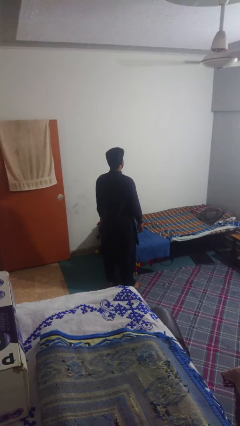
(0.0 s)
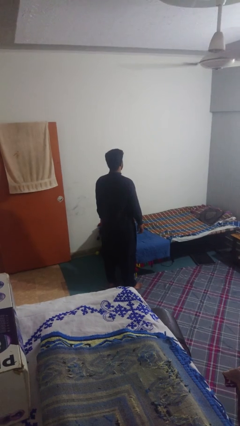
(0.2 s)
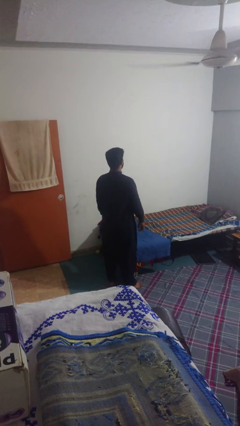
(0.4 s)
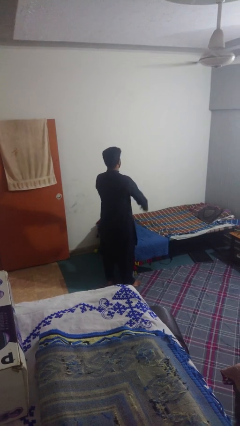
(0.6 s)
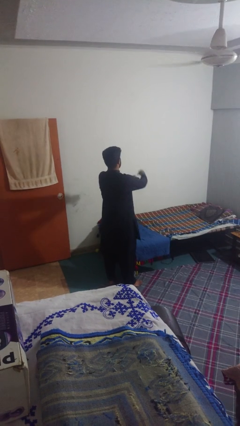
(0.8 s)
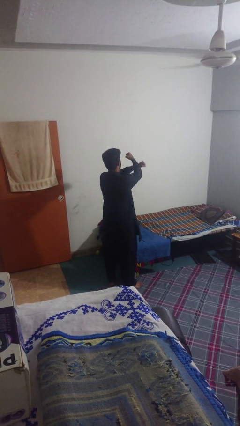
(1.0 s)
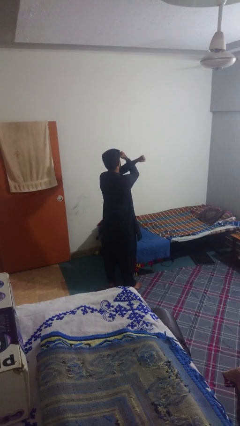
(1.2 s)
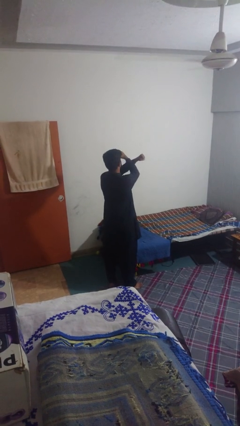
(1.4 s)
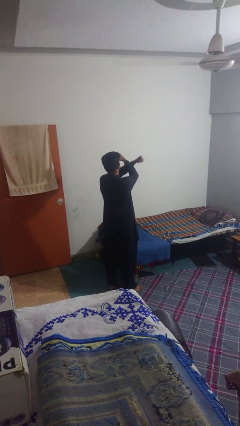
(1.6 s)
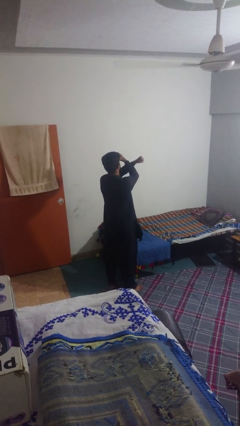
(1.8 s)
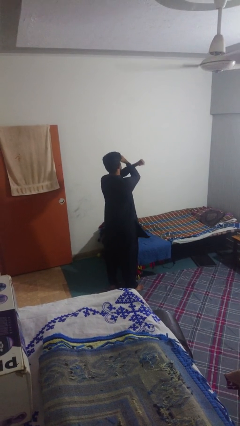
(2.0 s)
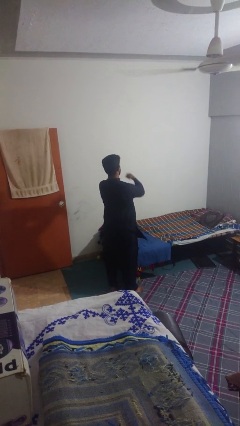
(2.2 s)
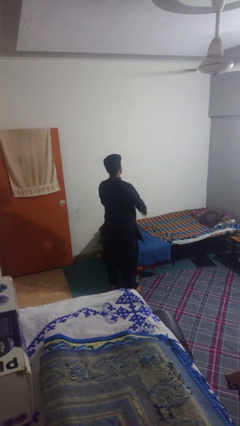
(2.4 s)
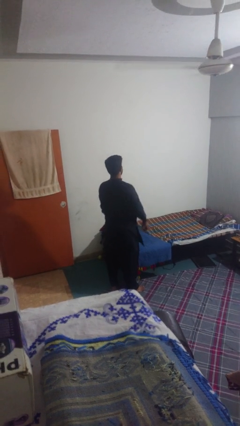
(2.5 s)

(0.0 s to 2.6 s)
person gestures arms x

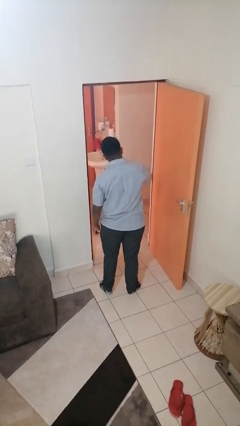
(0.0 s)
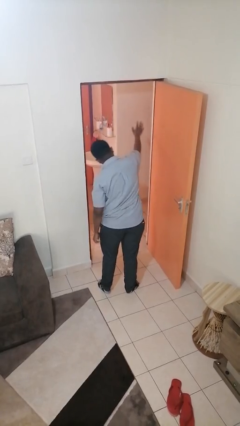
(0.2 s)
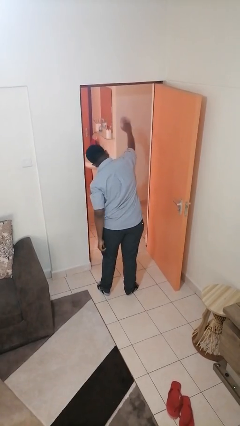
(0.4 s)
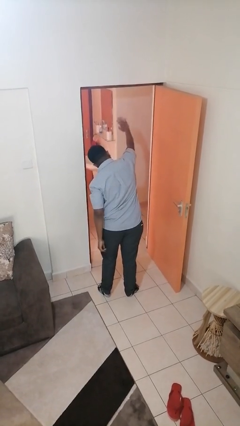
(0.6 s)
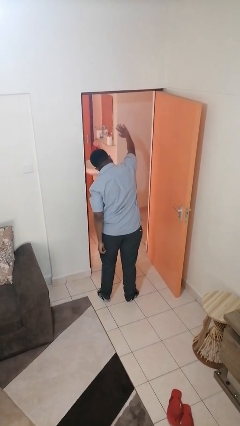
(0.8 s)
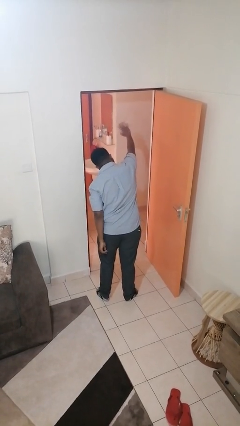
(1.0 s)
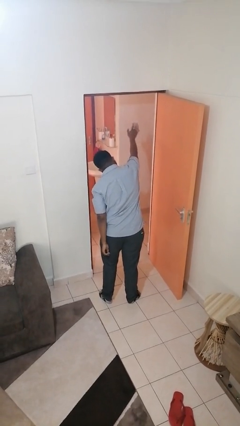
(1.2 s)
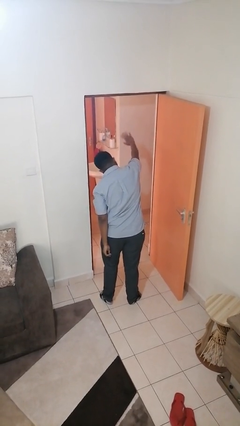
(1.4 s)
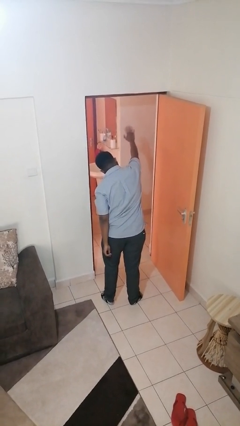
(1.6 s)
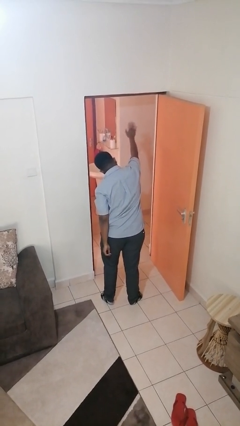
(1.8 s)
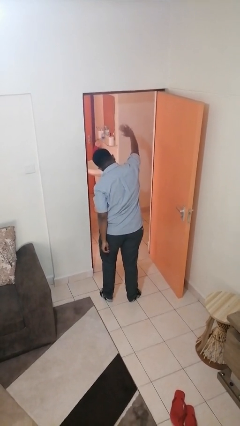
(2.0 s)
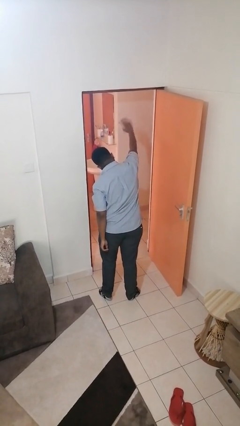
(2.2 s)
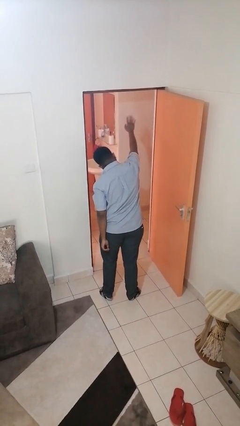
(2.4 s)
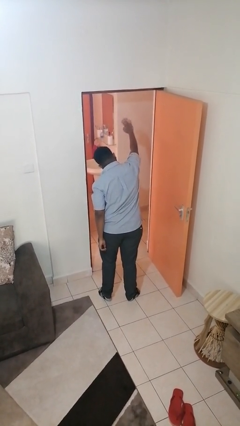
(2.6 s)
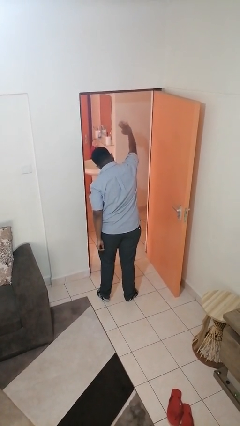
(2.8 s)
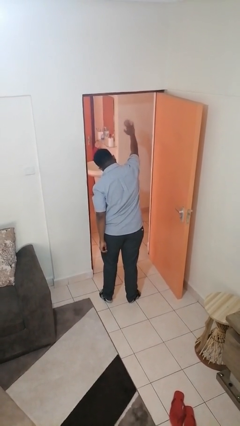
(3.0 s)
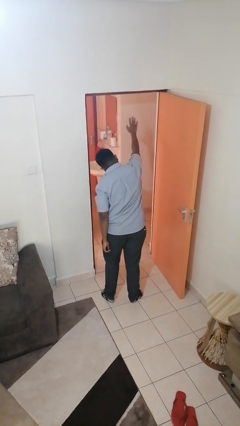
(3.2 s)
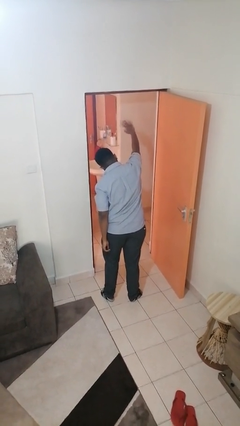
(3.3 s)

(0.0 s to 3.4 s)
person waves at person

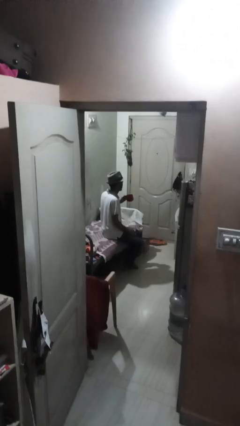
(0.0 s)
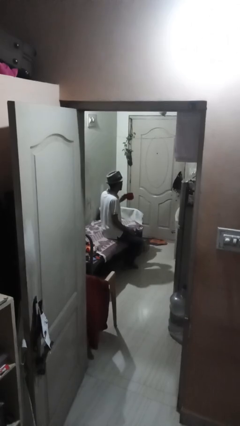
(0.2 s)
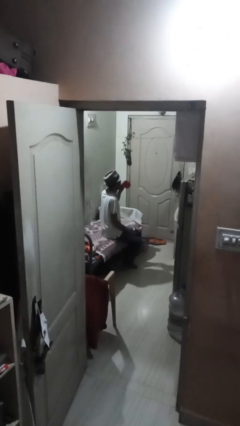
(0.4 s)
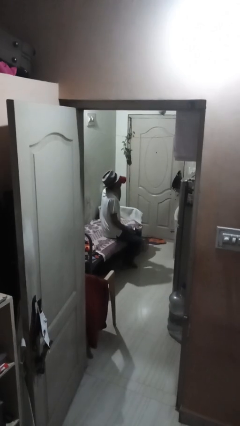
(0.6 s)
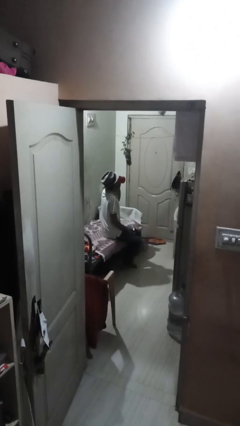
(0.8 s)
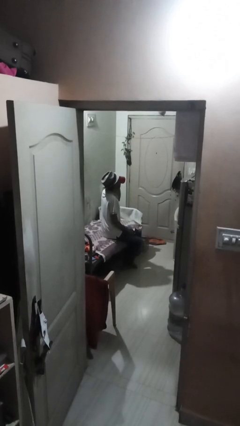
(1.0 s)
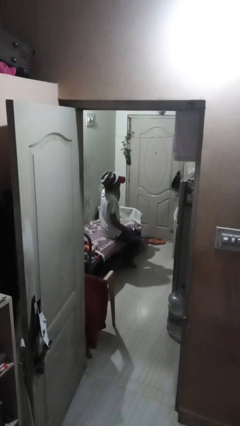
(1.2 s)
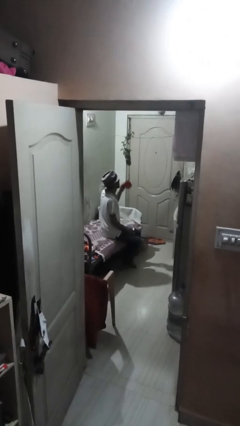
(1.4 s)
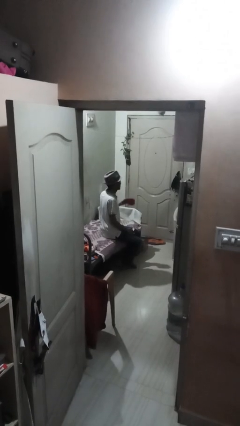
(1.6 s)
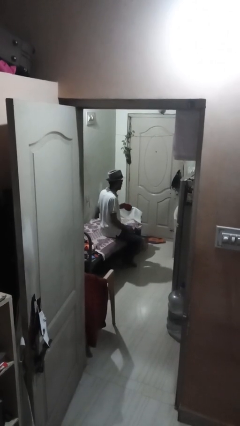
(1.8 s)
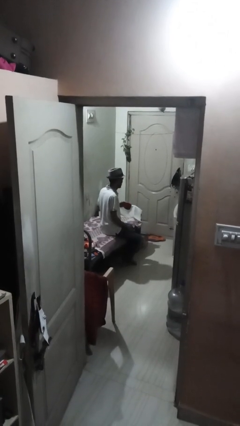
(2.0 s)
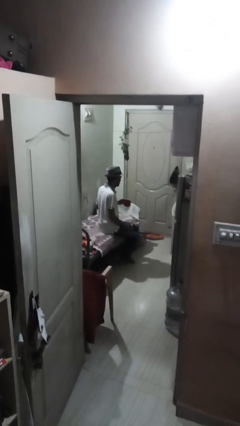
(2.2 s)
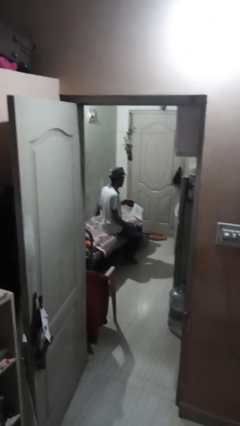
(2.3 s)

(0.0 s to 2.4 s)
person drinks from mug

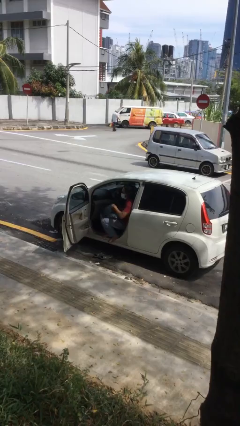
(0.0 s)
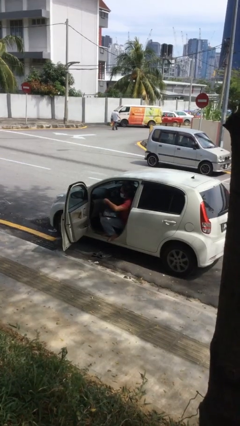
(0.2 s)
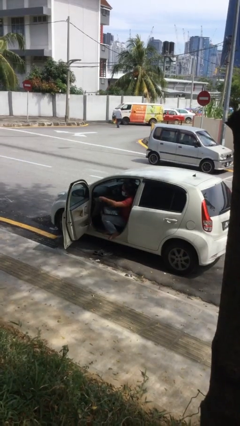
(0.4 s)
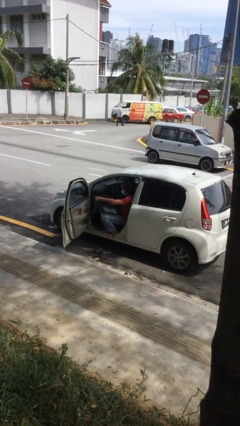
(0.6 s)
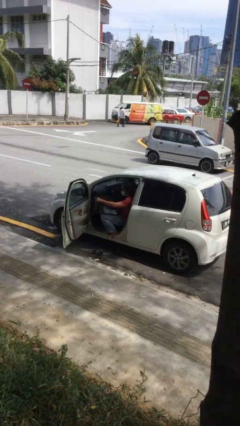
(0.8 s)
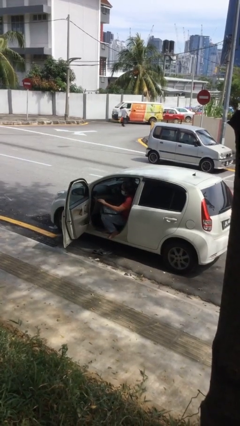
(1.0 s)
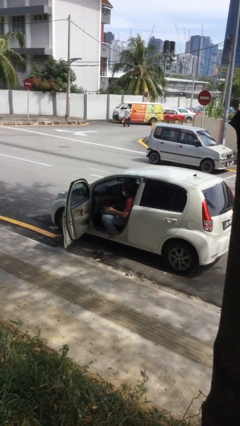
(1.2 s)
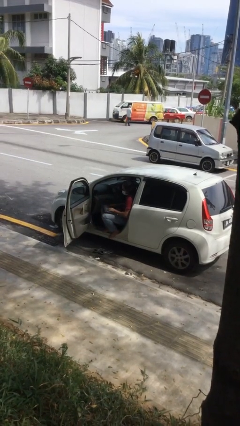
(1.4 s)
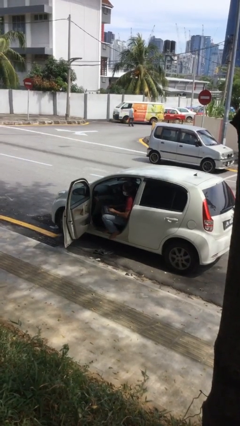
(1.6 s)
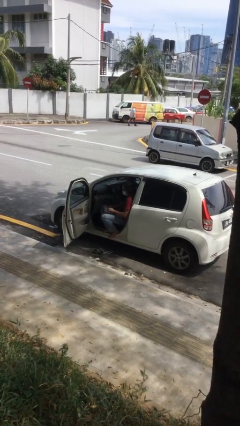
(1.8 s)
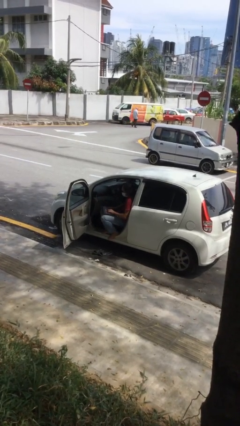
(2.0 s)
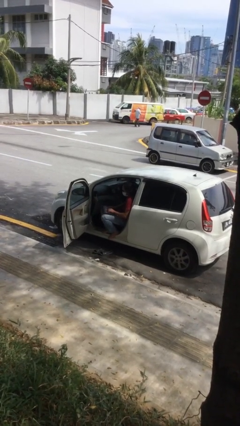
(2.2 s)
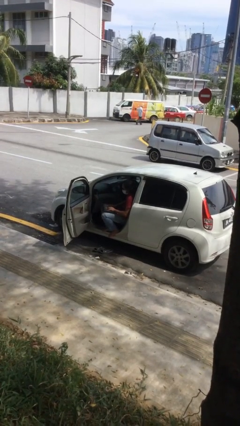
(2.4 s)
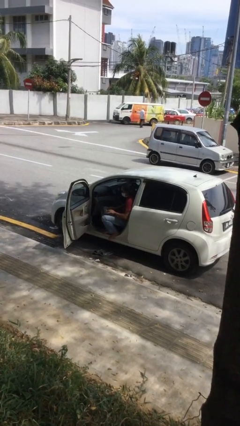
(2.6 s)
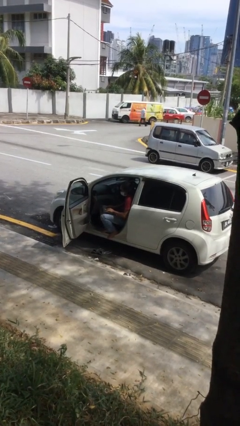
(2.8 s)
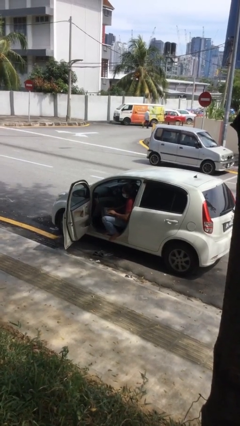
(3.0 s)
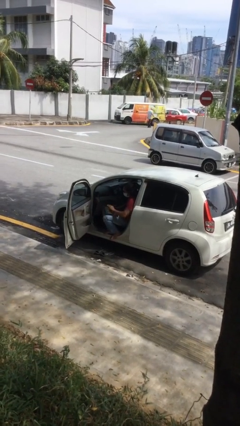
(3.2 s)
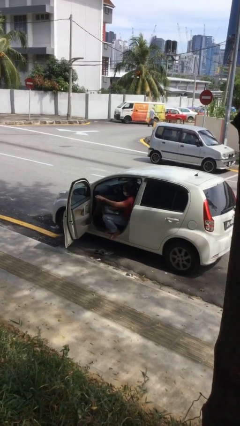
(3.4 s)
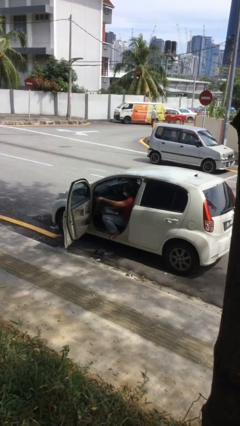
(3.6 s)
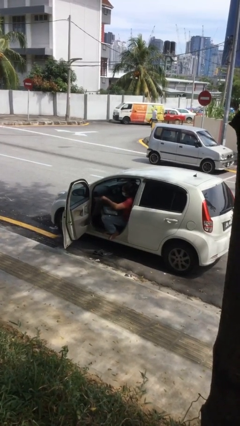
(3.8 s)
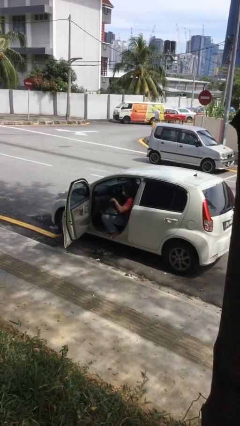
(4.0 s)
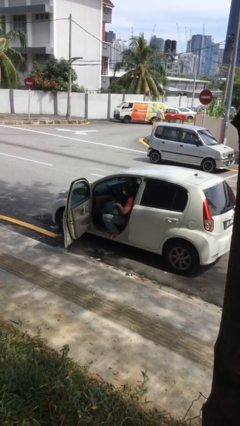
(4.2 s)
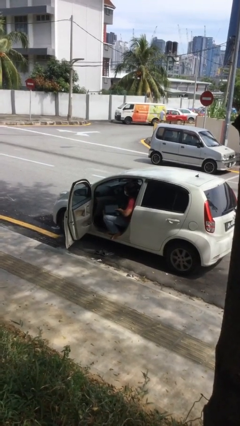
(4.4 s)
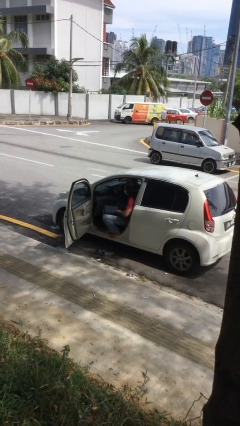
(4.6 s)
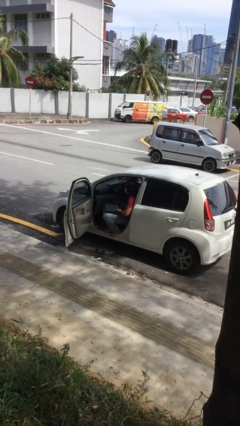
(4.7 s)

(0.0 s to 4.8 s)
person interacts with laptop

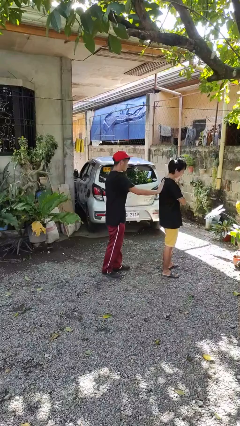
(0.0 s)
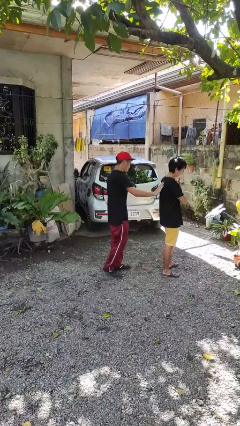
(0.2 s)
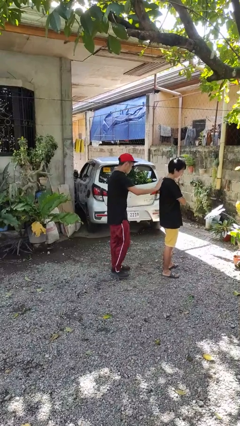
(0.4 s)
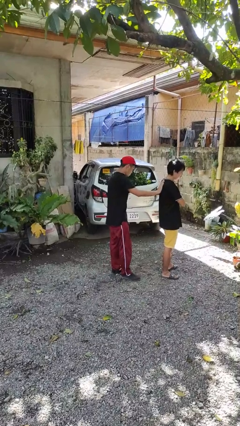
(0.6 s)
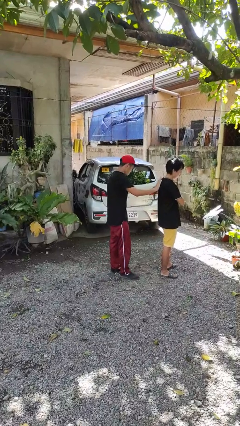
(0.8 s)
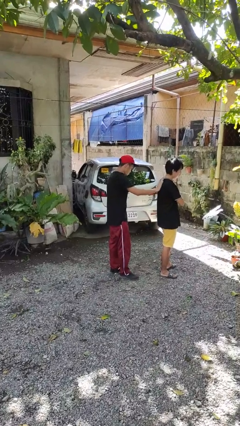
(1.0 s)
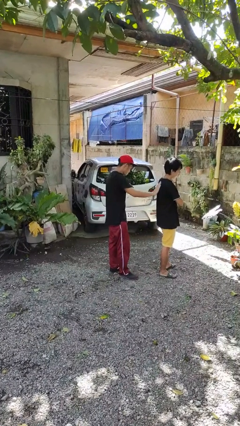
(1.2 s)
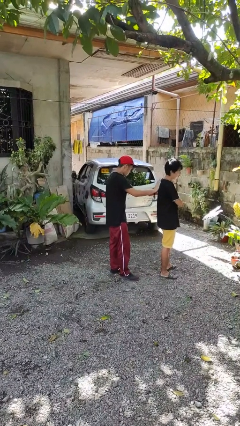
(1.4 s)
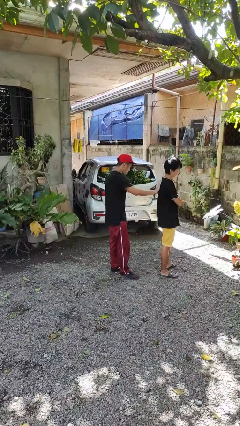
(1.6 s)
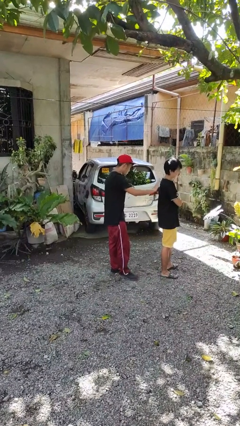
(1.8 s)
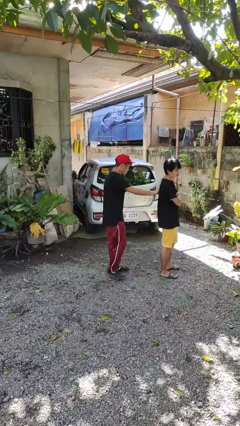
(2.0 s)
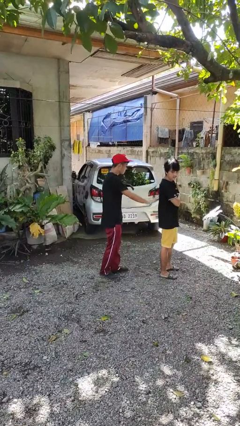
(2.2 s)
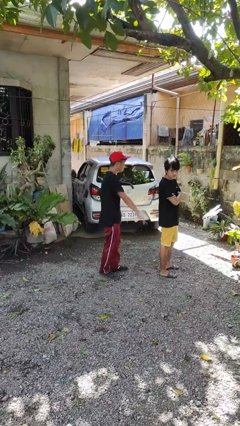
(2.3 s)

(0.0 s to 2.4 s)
person touches back of person

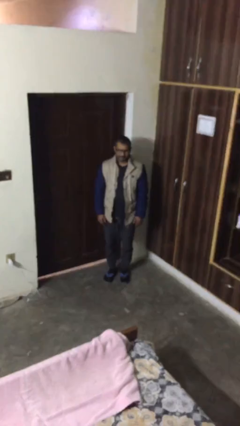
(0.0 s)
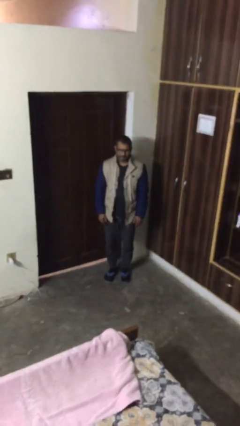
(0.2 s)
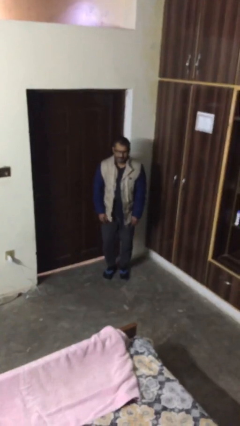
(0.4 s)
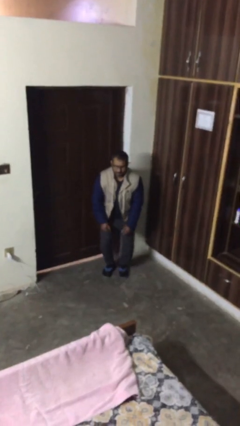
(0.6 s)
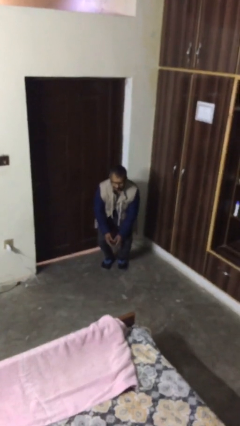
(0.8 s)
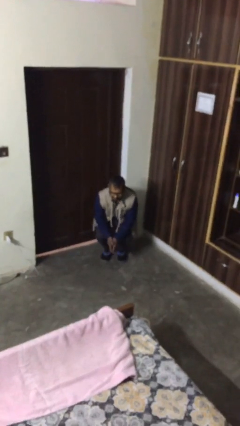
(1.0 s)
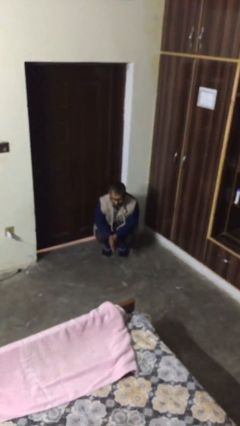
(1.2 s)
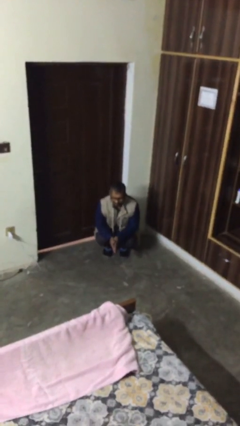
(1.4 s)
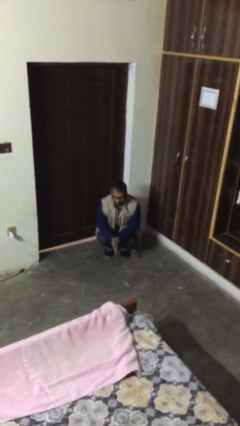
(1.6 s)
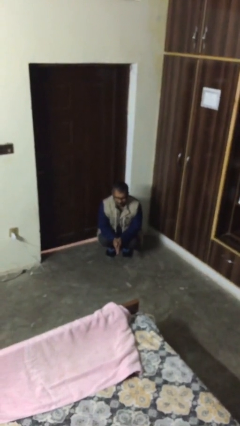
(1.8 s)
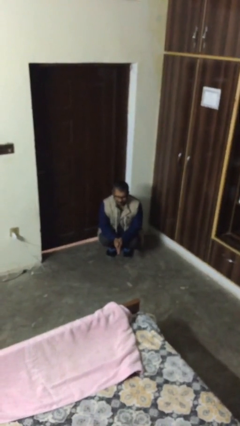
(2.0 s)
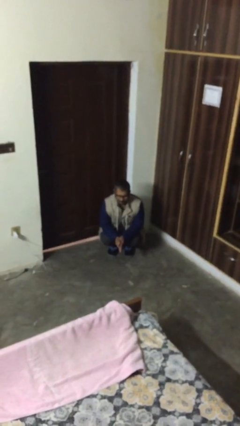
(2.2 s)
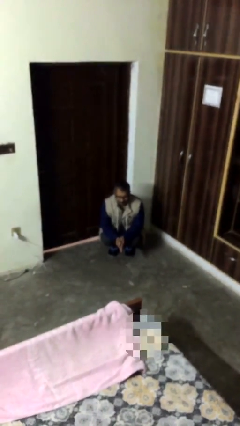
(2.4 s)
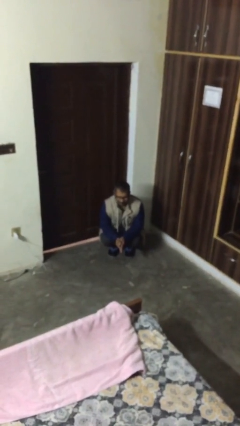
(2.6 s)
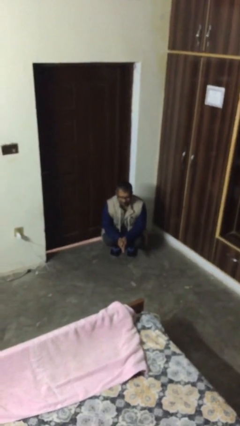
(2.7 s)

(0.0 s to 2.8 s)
person sits down
